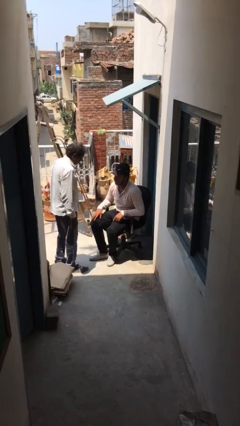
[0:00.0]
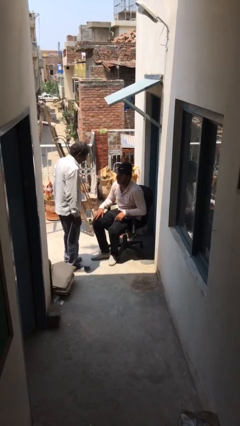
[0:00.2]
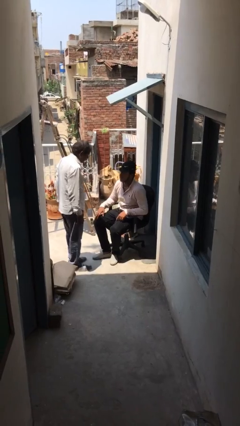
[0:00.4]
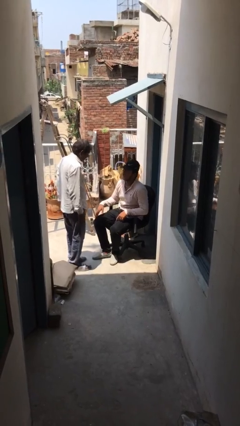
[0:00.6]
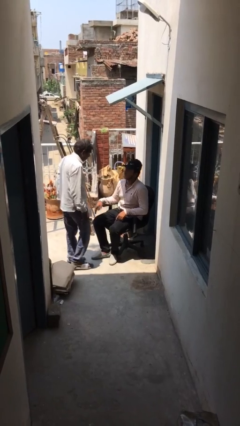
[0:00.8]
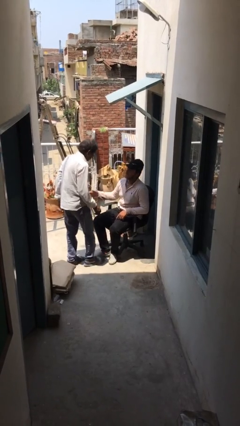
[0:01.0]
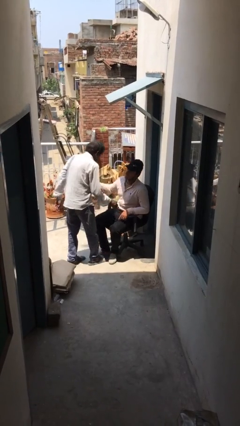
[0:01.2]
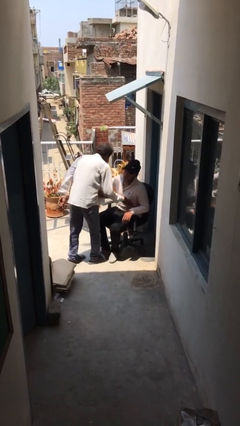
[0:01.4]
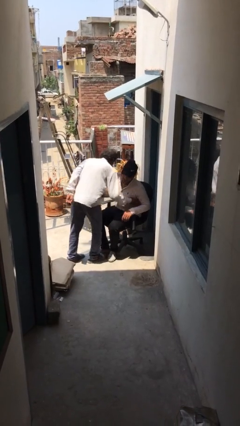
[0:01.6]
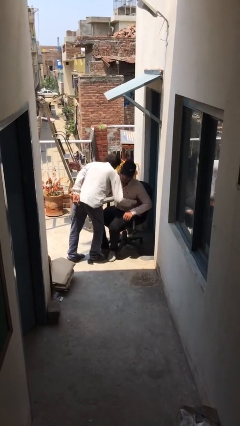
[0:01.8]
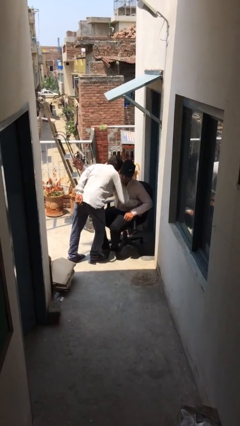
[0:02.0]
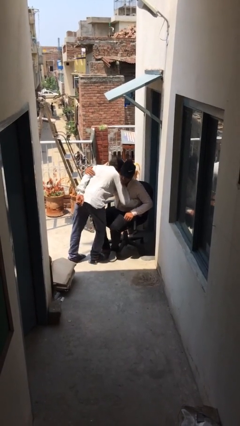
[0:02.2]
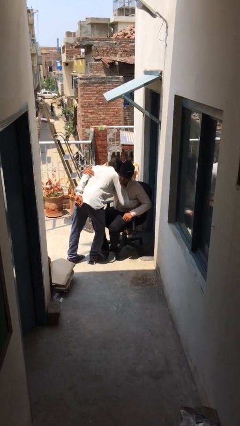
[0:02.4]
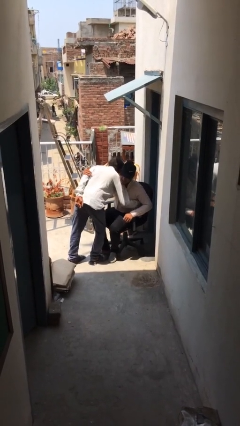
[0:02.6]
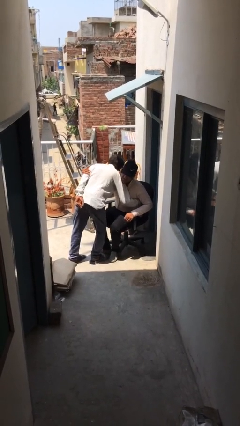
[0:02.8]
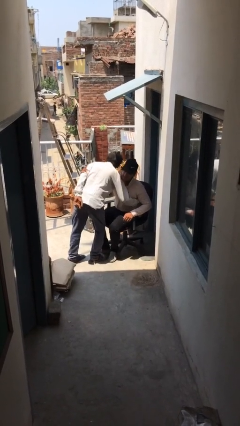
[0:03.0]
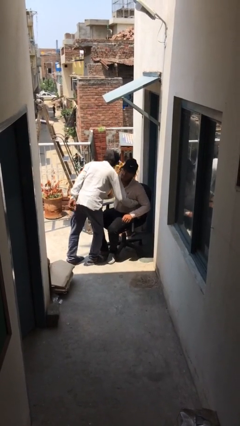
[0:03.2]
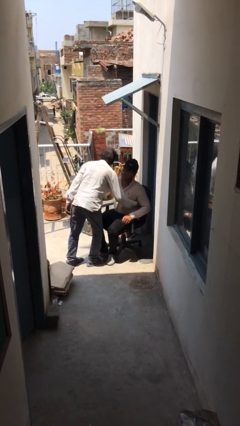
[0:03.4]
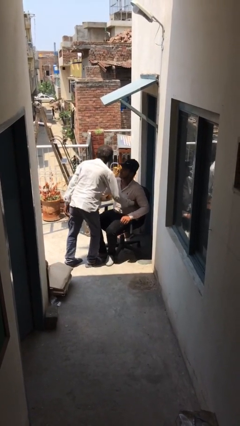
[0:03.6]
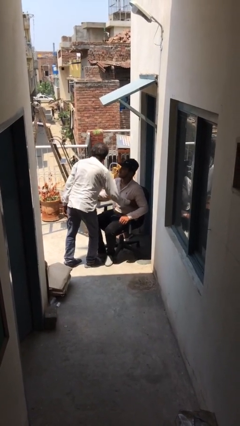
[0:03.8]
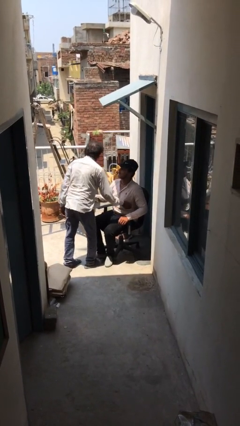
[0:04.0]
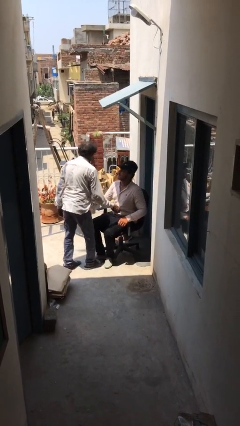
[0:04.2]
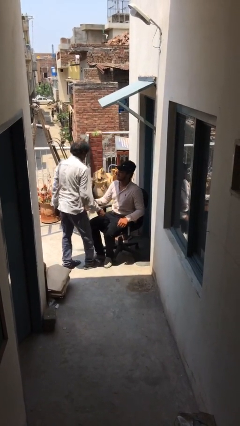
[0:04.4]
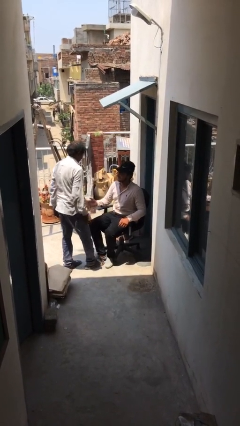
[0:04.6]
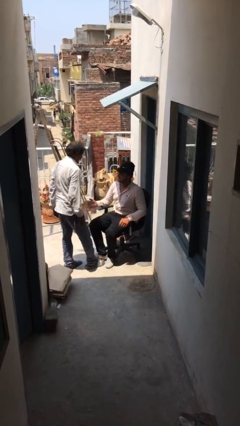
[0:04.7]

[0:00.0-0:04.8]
person embraces person

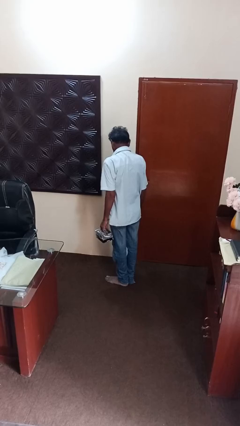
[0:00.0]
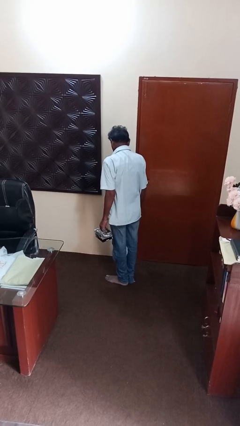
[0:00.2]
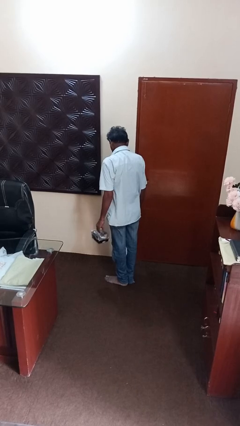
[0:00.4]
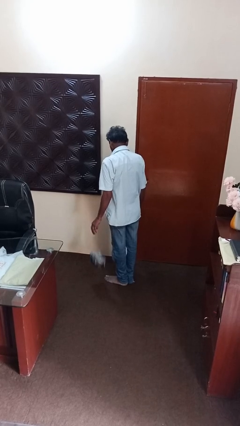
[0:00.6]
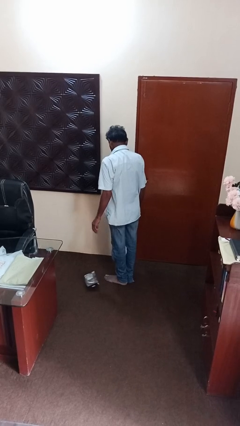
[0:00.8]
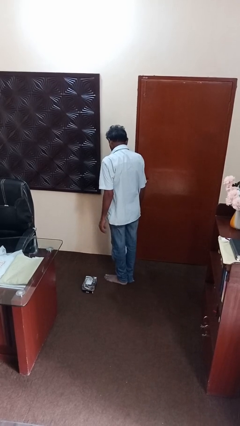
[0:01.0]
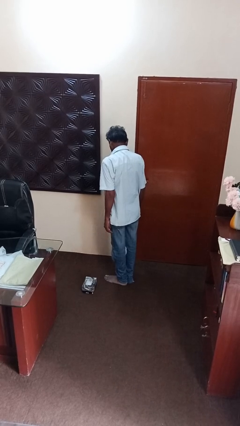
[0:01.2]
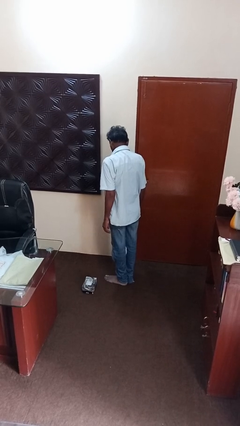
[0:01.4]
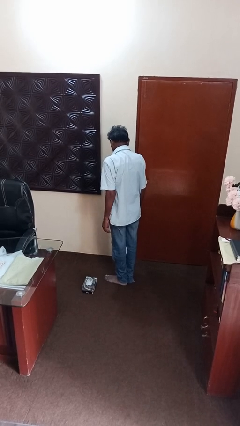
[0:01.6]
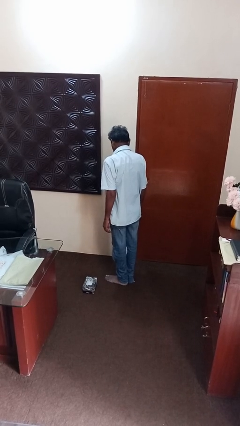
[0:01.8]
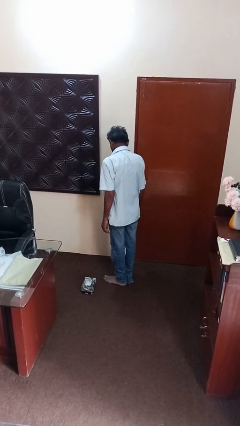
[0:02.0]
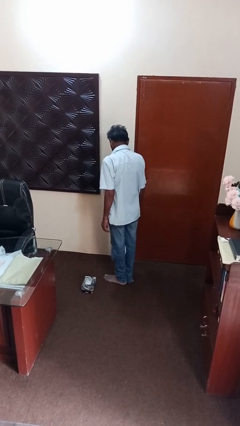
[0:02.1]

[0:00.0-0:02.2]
person throws object to ground

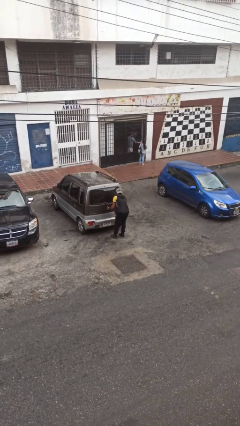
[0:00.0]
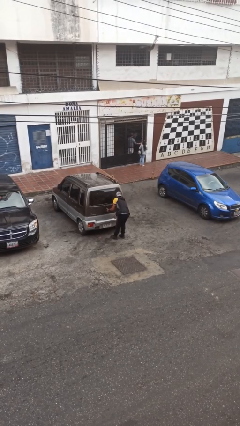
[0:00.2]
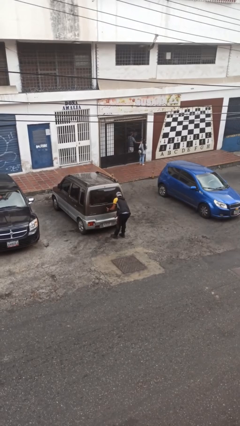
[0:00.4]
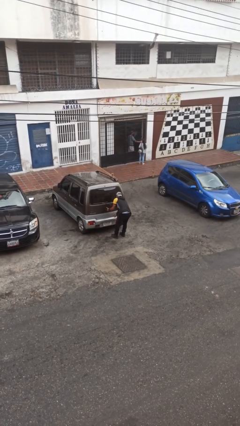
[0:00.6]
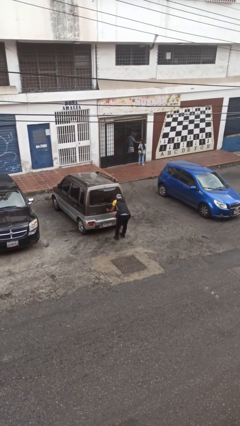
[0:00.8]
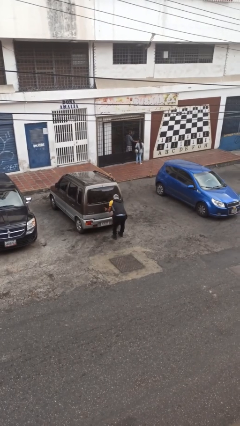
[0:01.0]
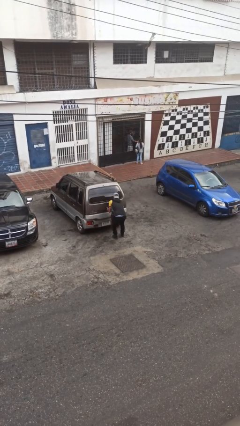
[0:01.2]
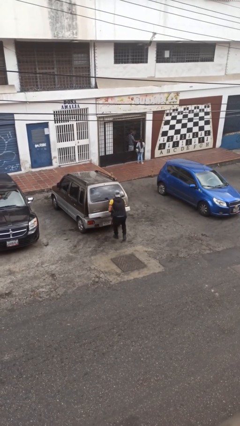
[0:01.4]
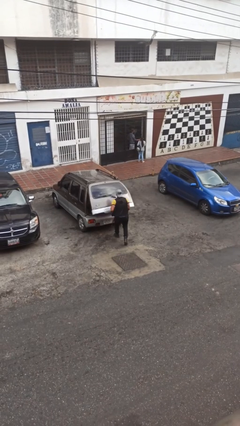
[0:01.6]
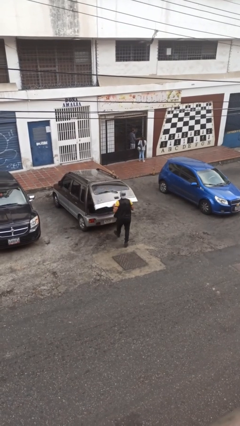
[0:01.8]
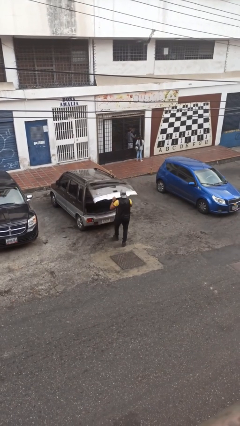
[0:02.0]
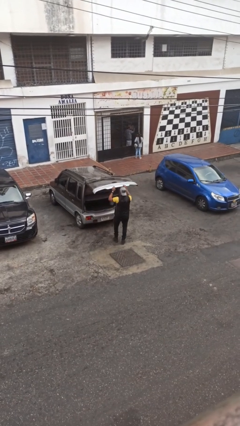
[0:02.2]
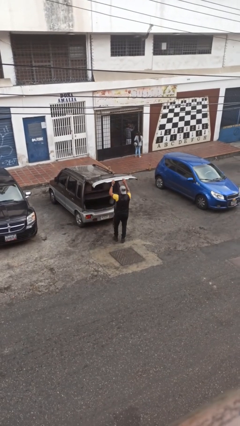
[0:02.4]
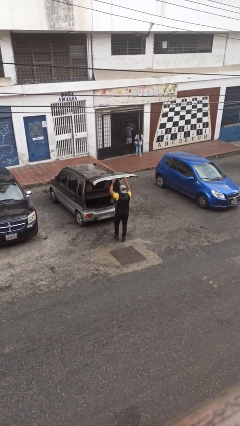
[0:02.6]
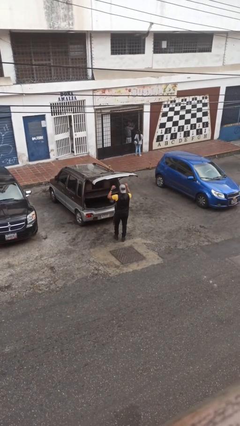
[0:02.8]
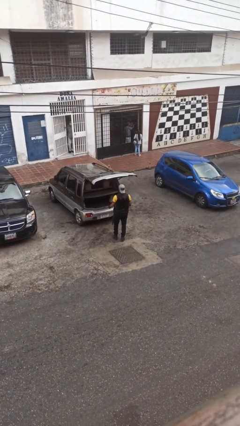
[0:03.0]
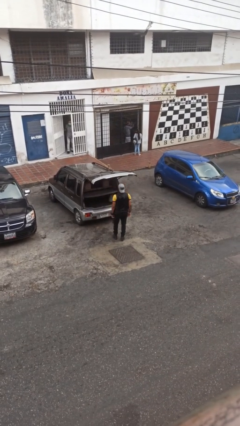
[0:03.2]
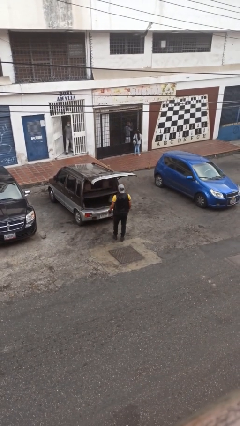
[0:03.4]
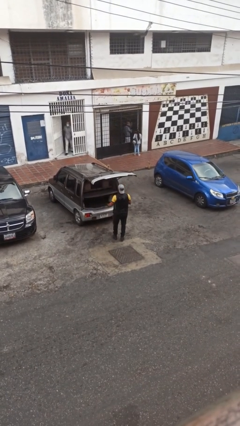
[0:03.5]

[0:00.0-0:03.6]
person opens car trunk

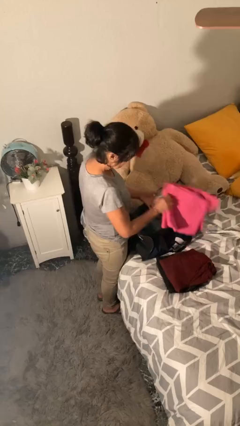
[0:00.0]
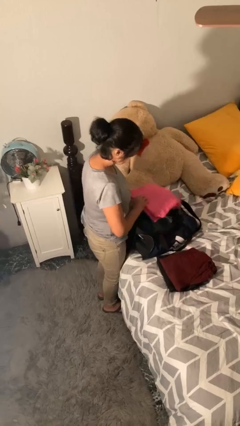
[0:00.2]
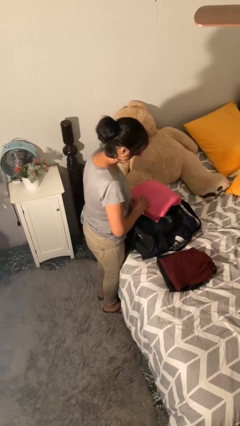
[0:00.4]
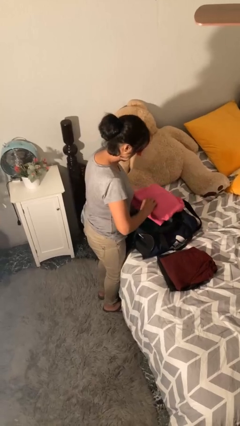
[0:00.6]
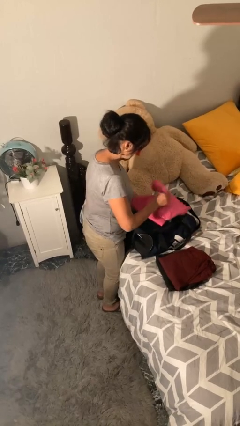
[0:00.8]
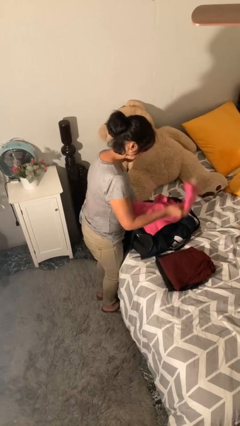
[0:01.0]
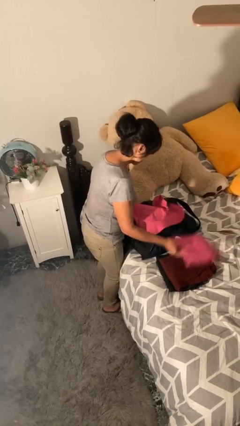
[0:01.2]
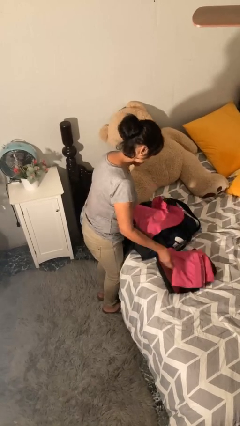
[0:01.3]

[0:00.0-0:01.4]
person loads clothes into suitcase

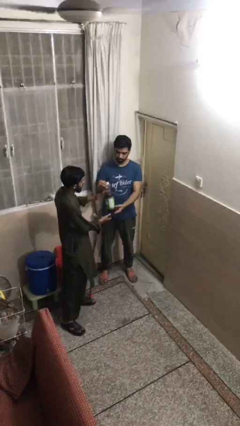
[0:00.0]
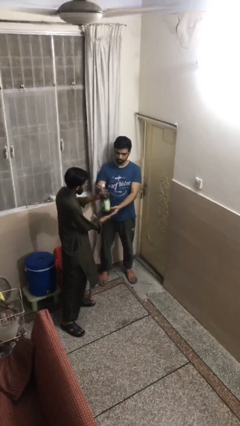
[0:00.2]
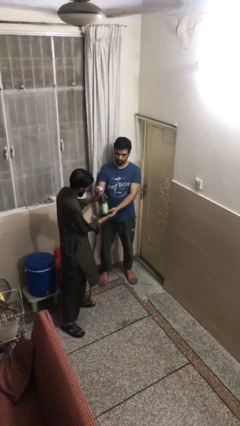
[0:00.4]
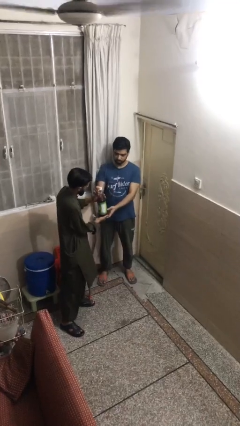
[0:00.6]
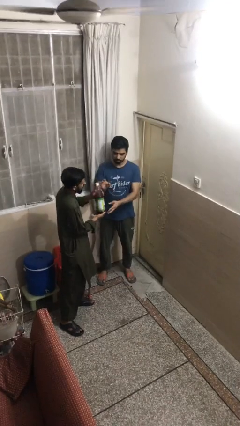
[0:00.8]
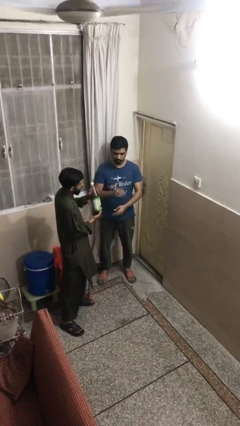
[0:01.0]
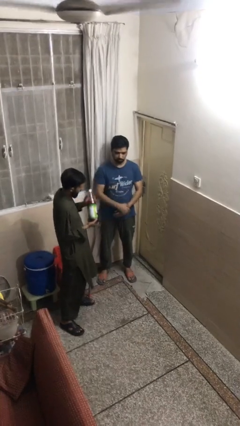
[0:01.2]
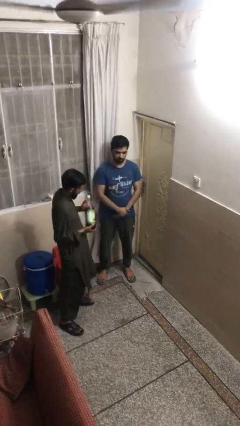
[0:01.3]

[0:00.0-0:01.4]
person transfers object to person

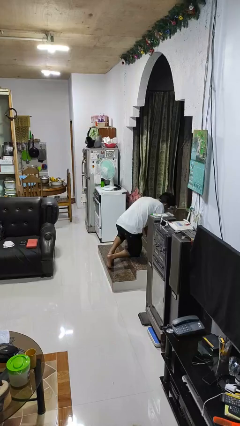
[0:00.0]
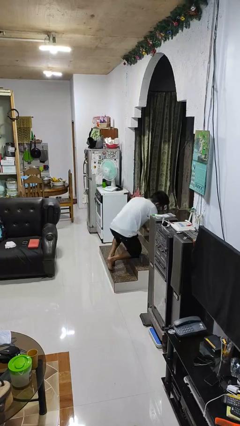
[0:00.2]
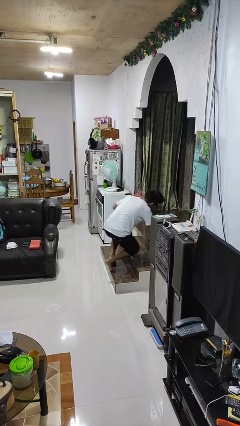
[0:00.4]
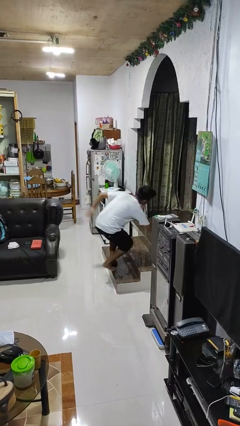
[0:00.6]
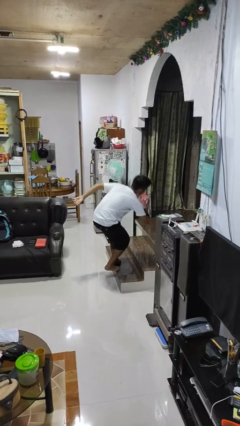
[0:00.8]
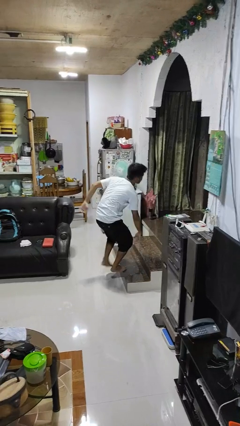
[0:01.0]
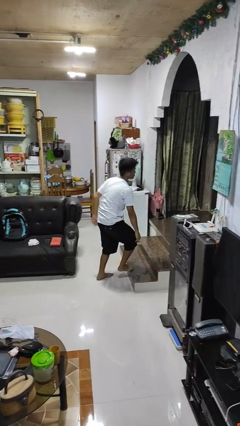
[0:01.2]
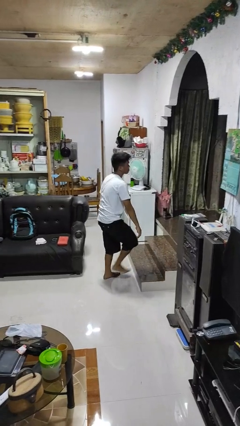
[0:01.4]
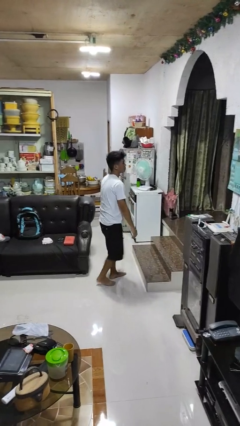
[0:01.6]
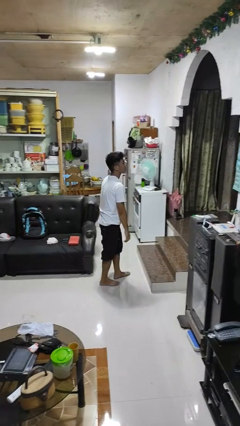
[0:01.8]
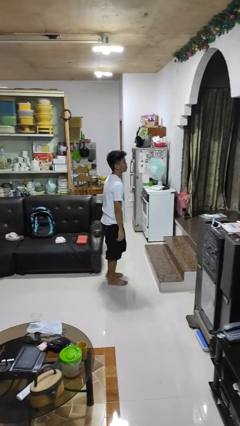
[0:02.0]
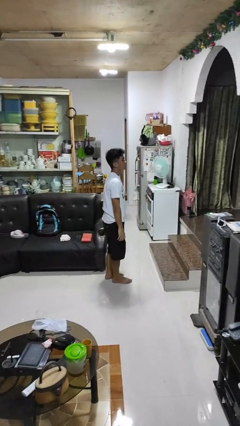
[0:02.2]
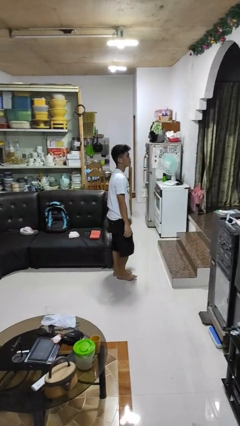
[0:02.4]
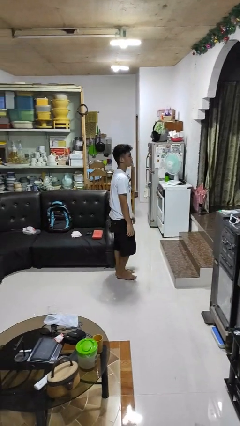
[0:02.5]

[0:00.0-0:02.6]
person stands up from floor

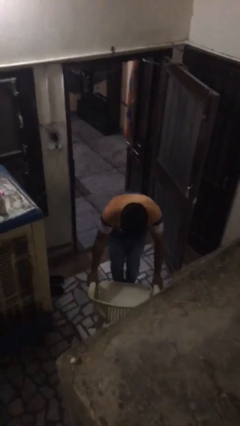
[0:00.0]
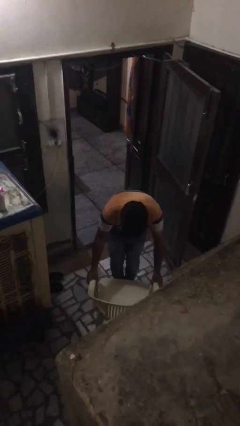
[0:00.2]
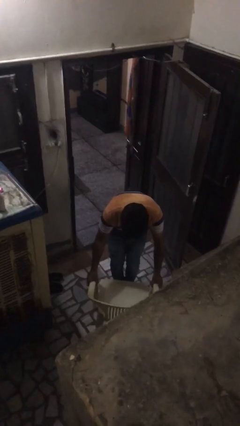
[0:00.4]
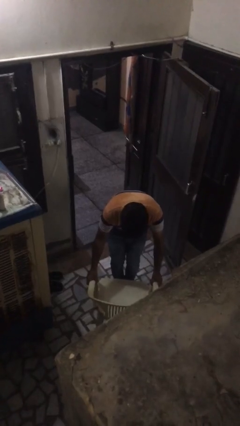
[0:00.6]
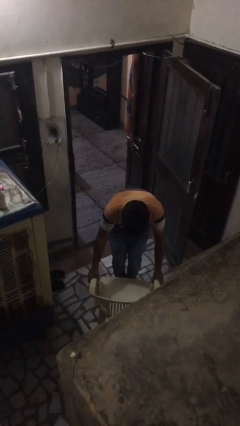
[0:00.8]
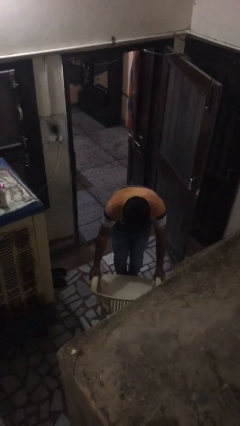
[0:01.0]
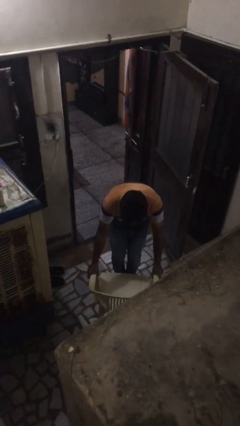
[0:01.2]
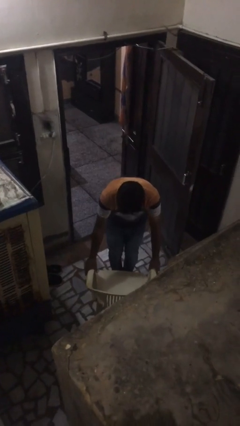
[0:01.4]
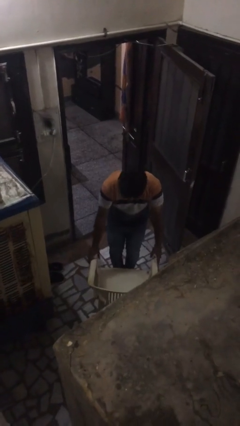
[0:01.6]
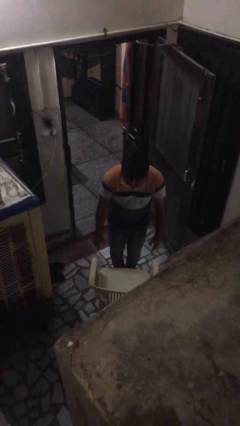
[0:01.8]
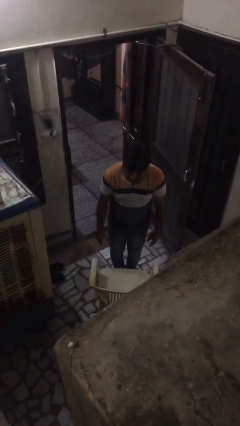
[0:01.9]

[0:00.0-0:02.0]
person puts down object on floor
